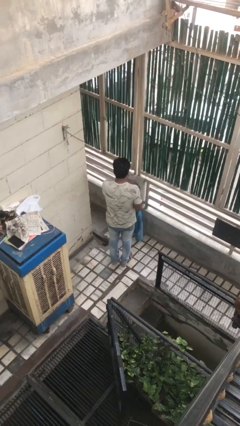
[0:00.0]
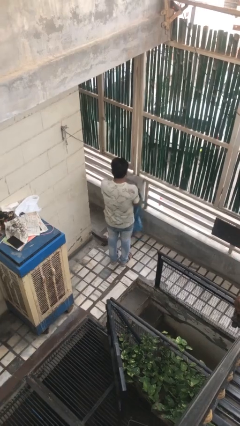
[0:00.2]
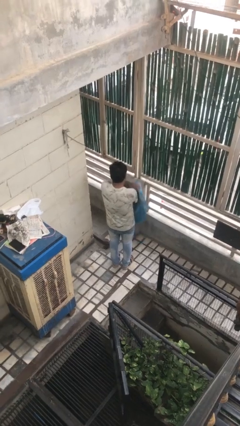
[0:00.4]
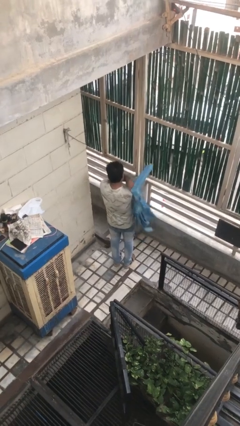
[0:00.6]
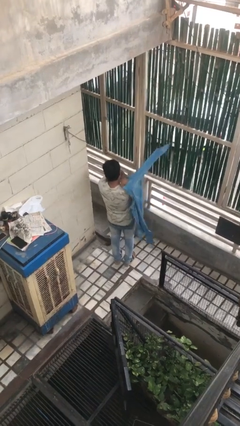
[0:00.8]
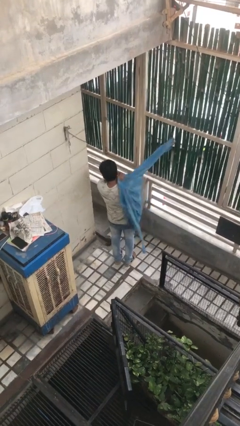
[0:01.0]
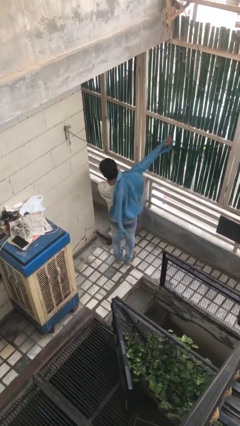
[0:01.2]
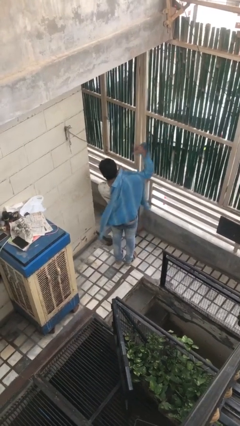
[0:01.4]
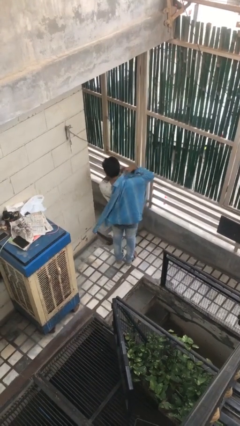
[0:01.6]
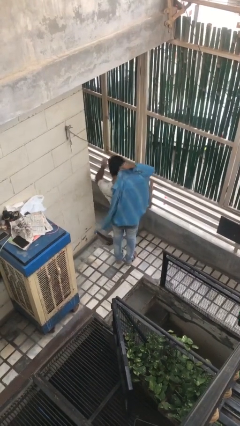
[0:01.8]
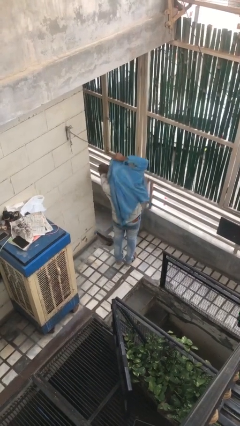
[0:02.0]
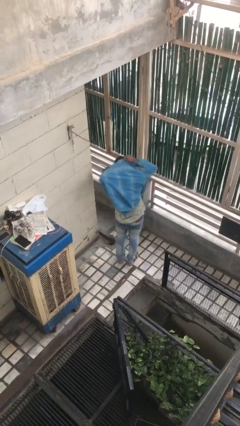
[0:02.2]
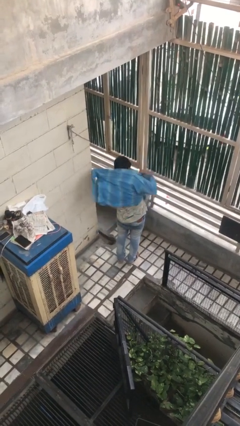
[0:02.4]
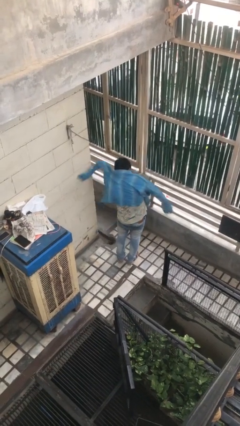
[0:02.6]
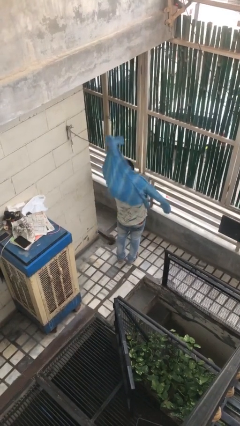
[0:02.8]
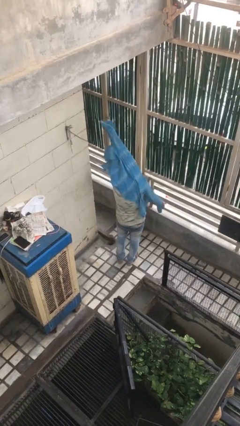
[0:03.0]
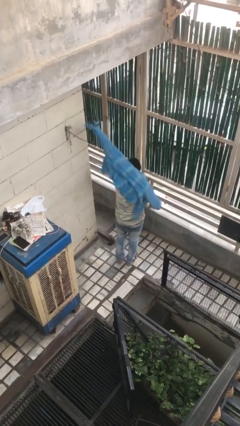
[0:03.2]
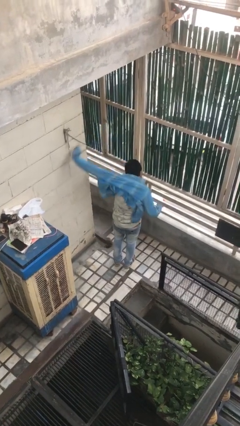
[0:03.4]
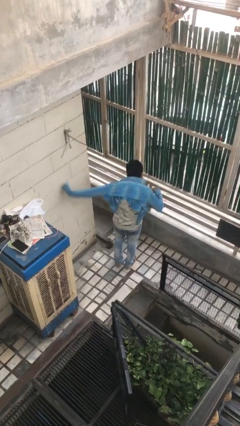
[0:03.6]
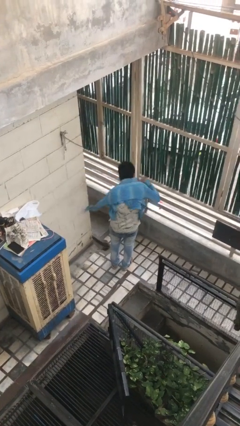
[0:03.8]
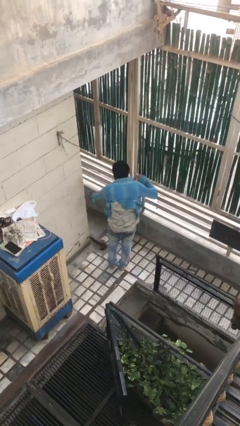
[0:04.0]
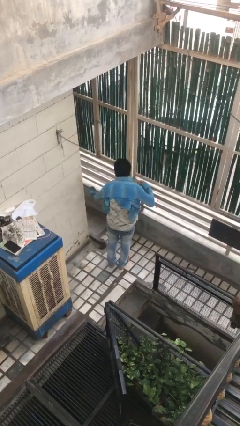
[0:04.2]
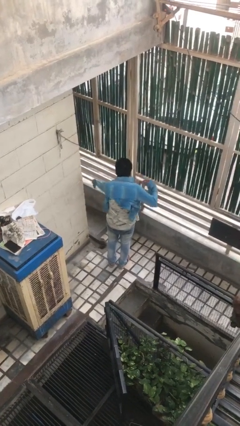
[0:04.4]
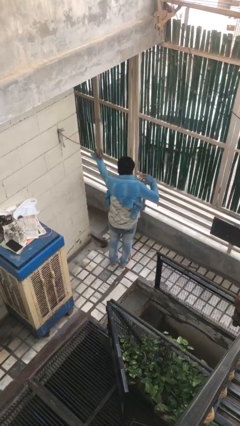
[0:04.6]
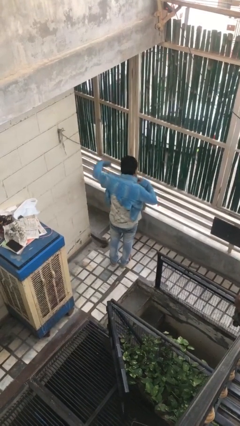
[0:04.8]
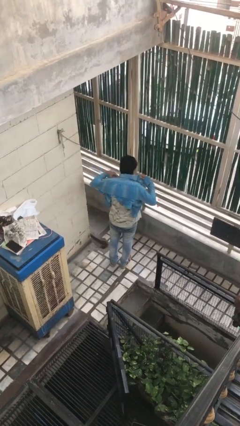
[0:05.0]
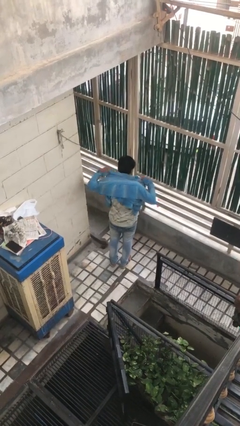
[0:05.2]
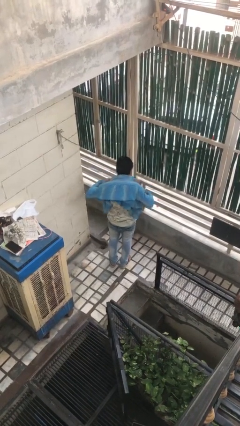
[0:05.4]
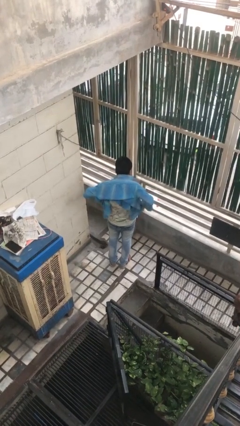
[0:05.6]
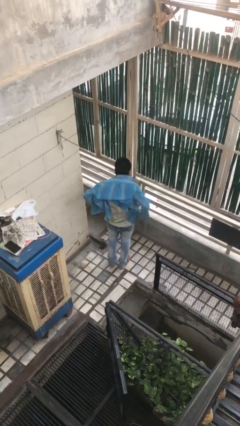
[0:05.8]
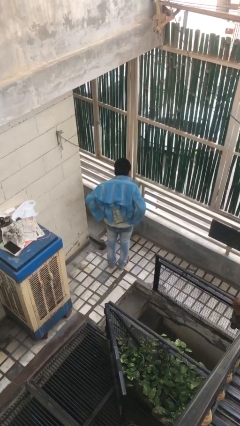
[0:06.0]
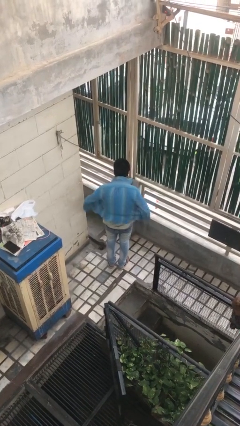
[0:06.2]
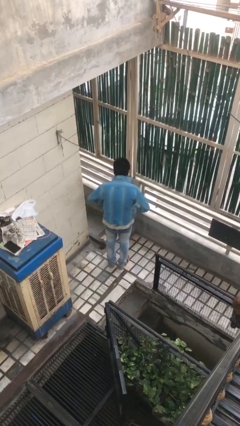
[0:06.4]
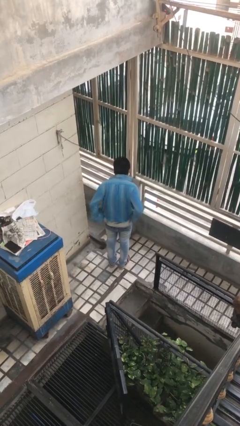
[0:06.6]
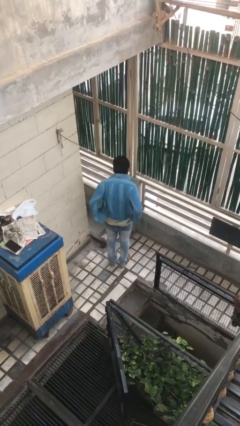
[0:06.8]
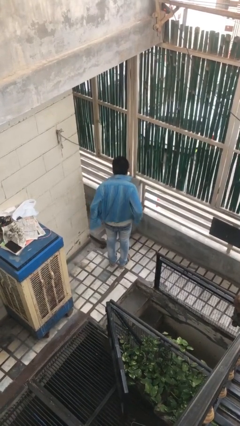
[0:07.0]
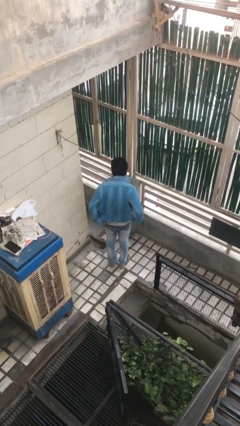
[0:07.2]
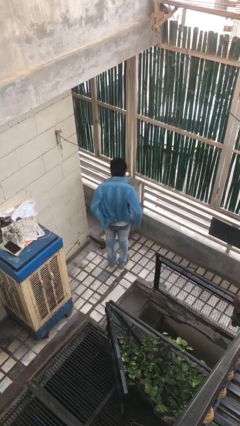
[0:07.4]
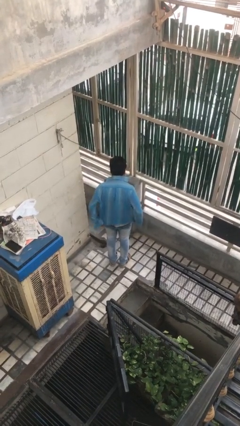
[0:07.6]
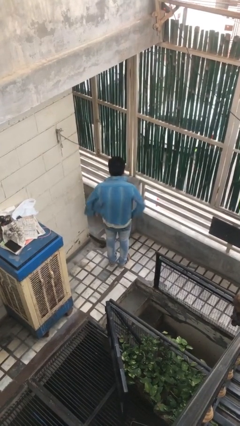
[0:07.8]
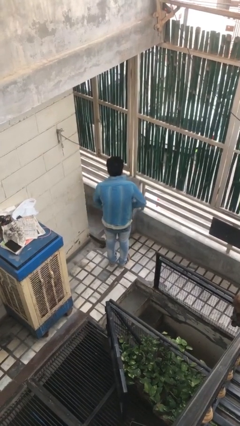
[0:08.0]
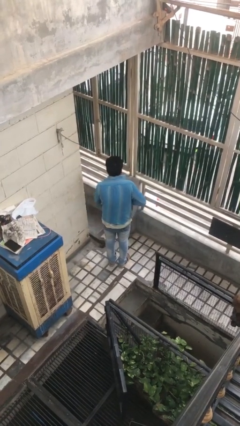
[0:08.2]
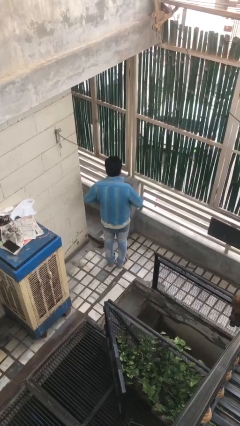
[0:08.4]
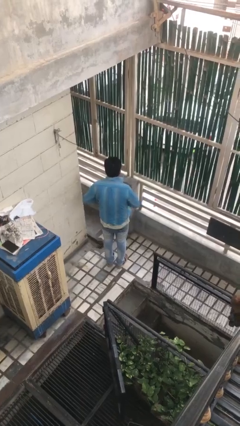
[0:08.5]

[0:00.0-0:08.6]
person puts on shirt

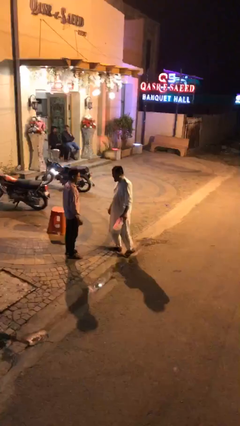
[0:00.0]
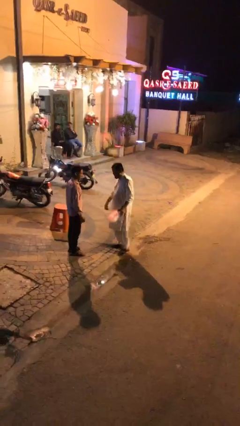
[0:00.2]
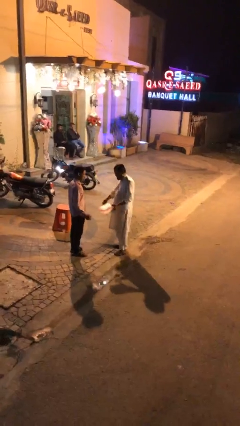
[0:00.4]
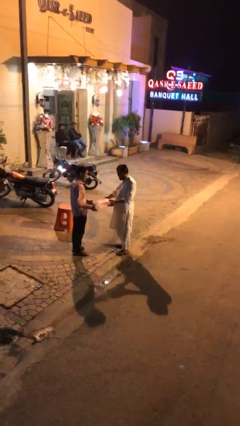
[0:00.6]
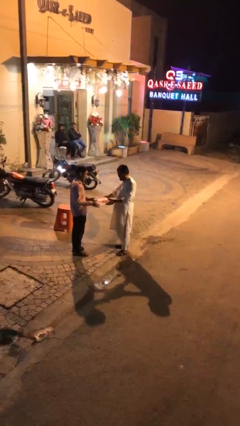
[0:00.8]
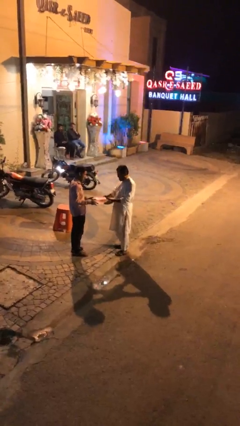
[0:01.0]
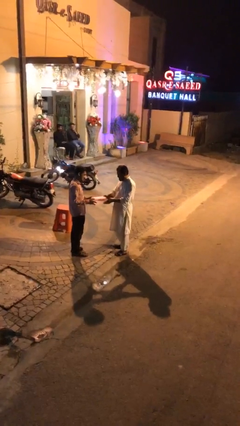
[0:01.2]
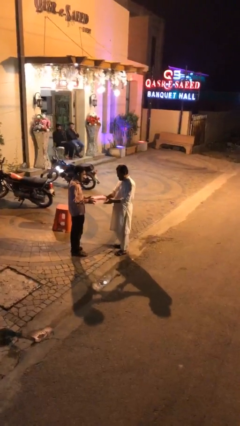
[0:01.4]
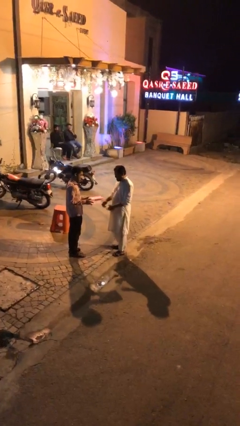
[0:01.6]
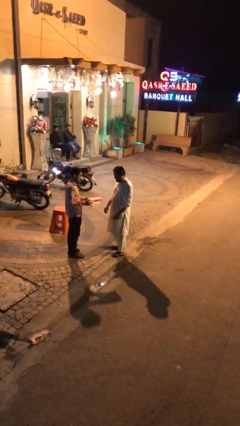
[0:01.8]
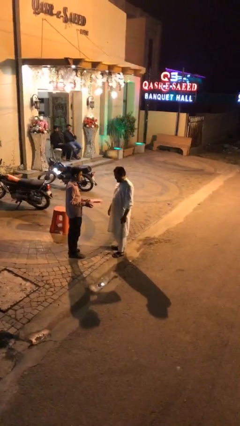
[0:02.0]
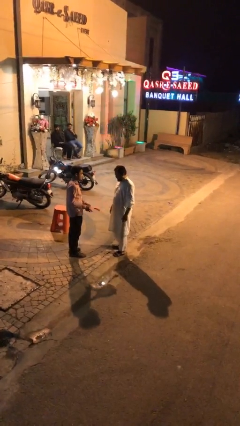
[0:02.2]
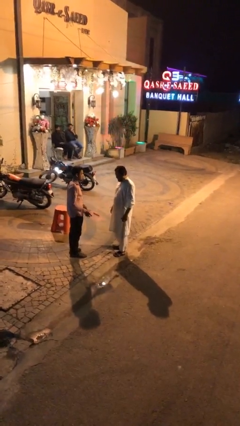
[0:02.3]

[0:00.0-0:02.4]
person transfers object to person

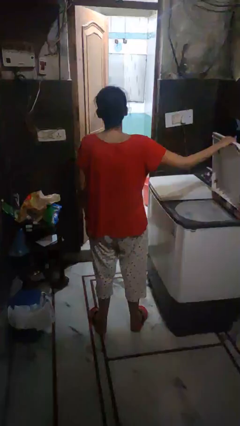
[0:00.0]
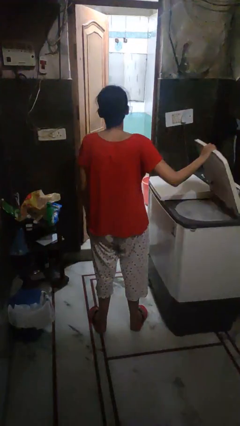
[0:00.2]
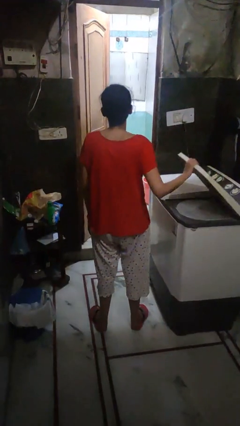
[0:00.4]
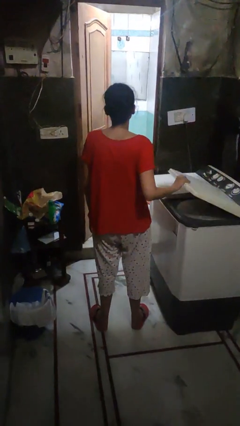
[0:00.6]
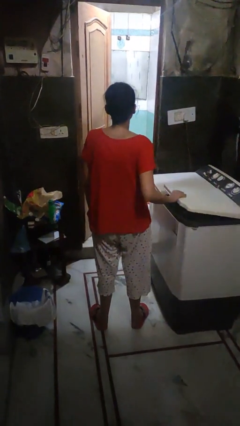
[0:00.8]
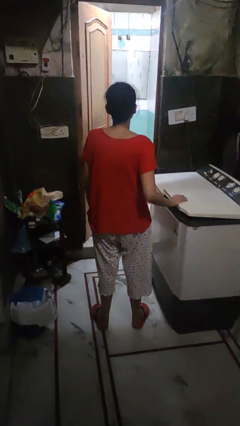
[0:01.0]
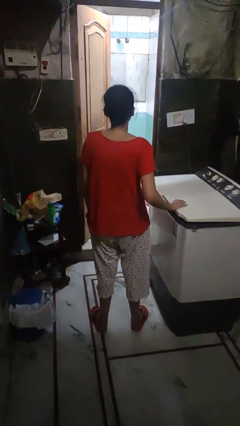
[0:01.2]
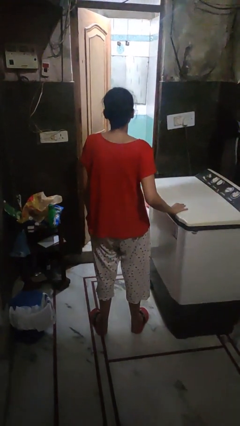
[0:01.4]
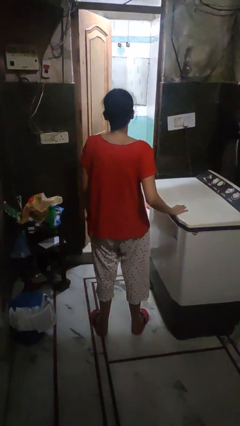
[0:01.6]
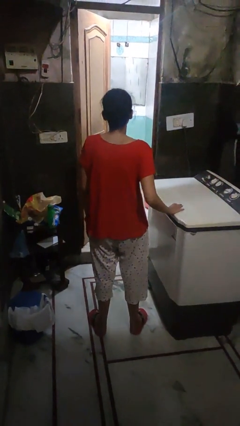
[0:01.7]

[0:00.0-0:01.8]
person closes clothes washer

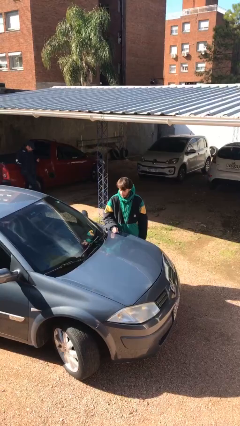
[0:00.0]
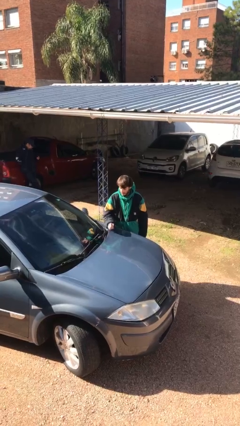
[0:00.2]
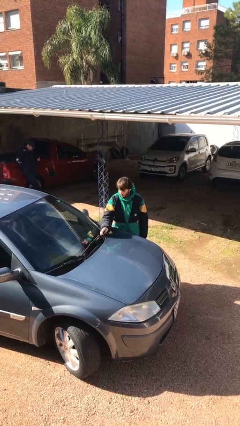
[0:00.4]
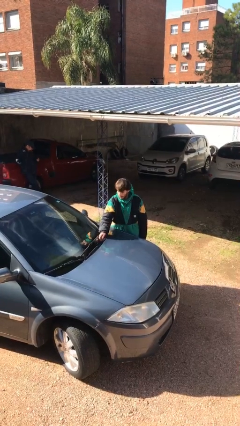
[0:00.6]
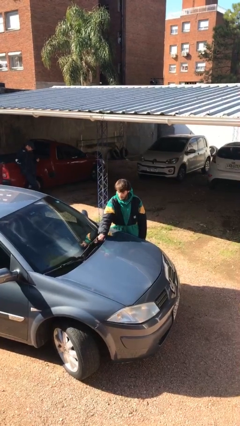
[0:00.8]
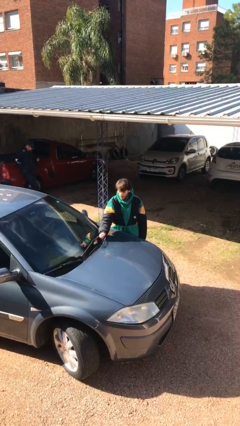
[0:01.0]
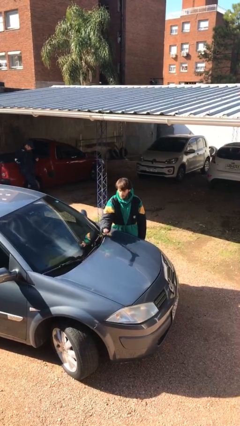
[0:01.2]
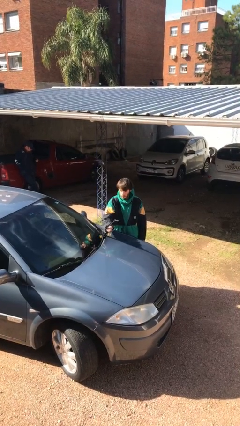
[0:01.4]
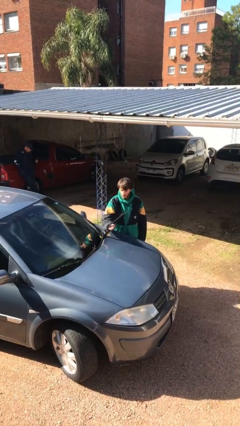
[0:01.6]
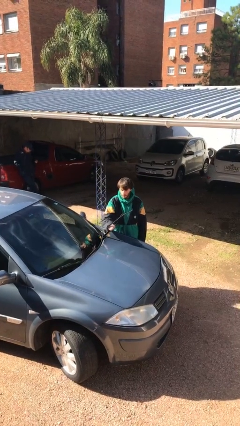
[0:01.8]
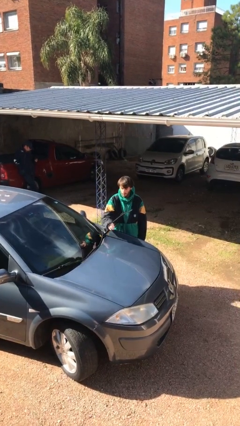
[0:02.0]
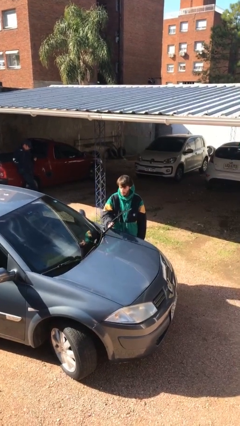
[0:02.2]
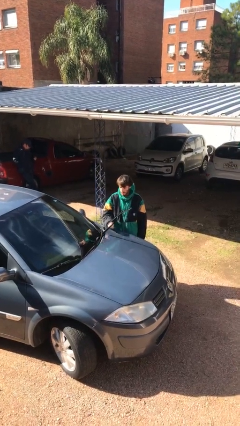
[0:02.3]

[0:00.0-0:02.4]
person flips up car wipers

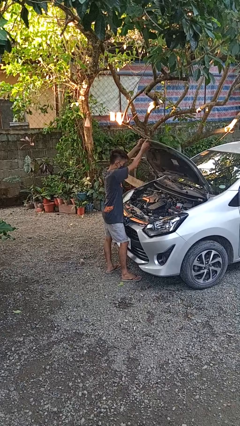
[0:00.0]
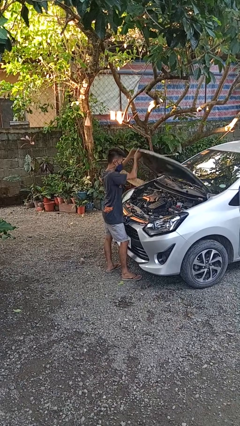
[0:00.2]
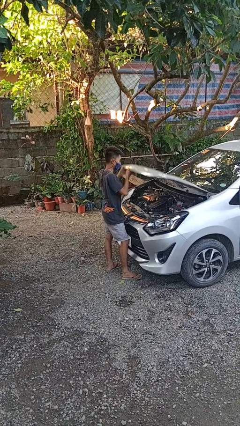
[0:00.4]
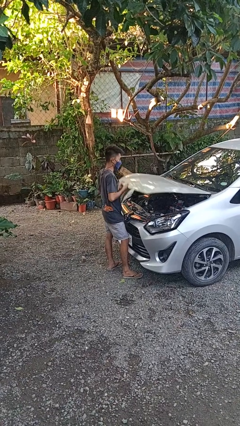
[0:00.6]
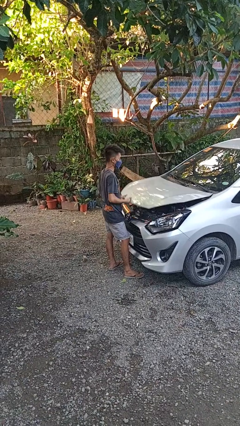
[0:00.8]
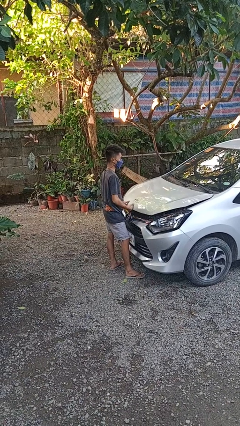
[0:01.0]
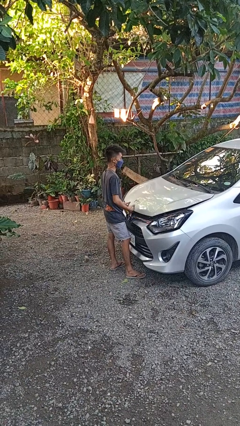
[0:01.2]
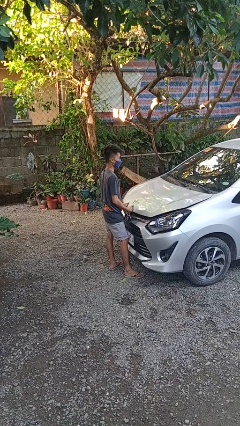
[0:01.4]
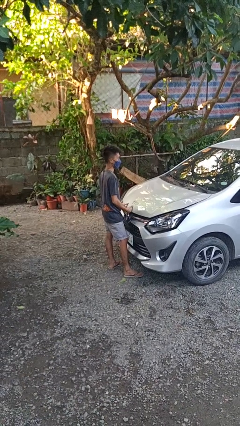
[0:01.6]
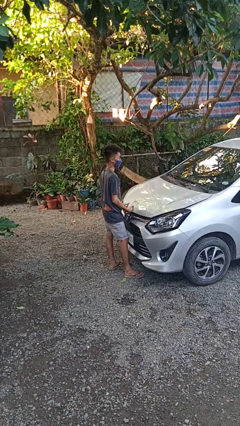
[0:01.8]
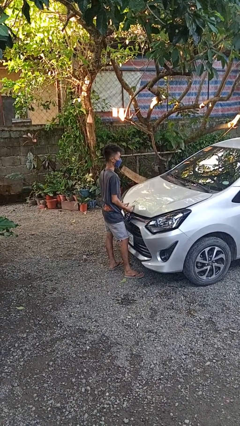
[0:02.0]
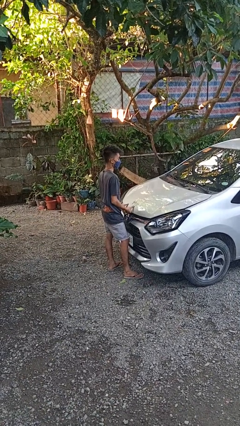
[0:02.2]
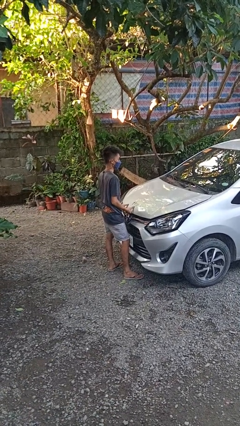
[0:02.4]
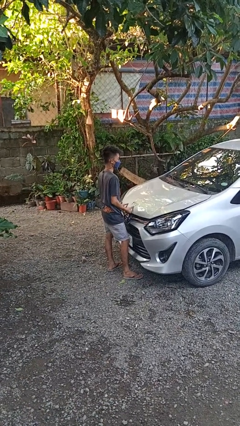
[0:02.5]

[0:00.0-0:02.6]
person closes car hood
